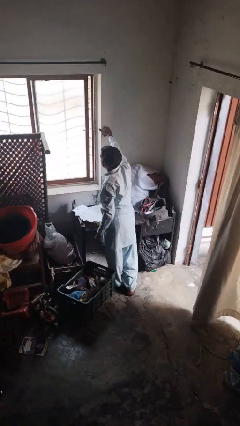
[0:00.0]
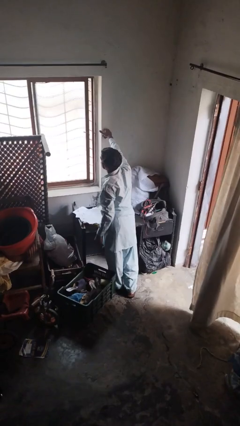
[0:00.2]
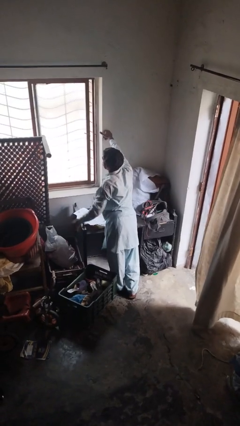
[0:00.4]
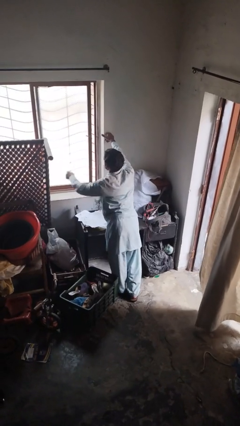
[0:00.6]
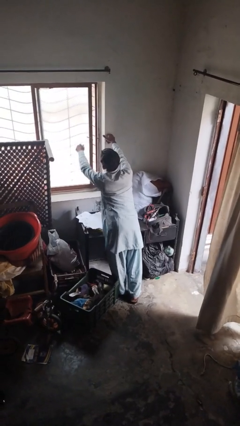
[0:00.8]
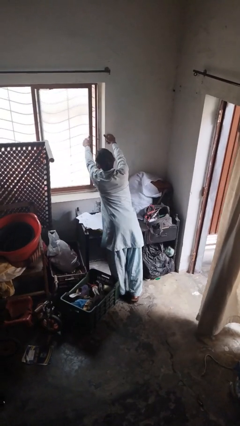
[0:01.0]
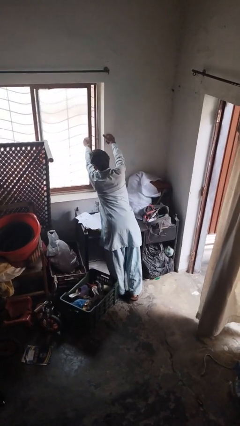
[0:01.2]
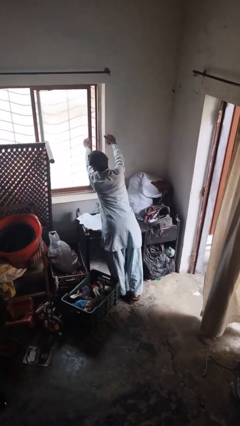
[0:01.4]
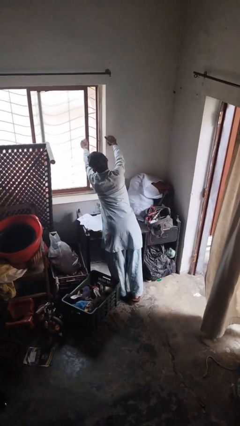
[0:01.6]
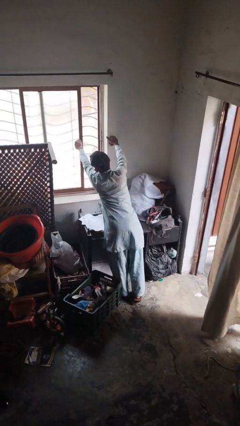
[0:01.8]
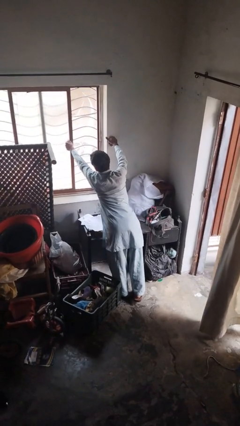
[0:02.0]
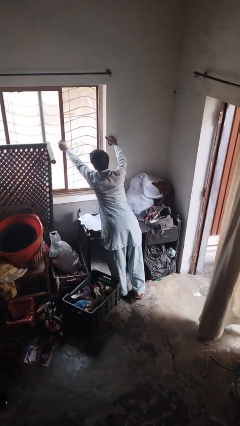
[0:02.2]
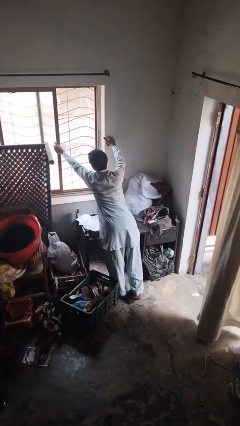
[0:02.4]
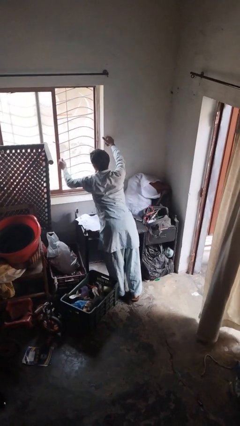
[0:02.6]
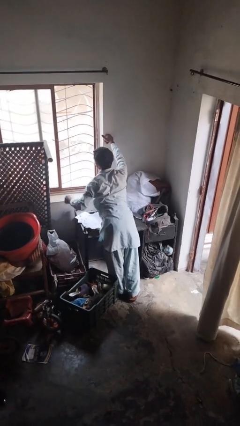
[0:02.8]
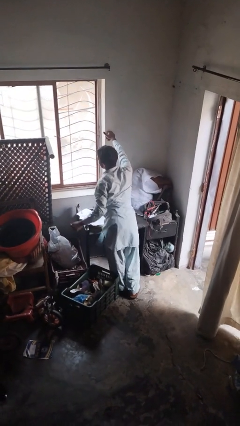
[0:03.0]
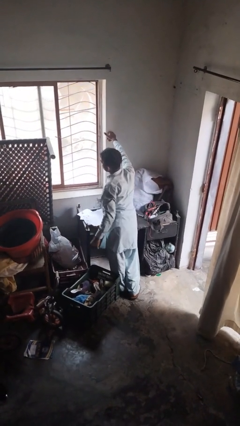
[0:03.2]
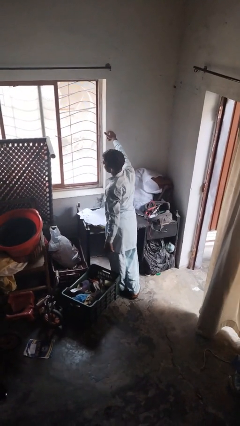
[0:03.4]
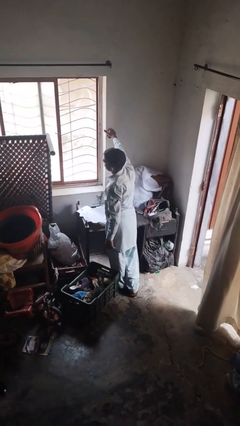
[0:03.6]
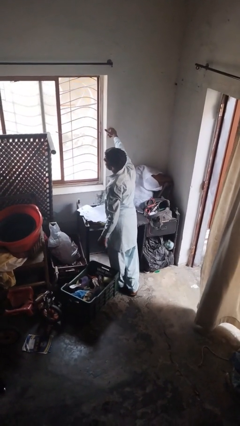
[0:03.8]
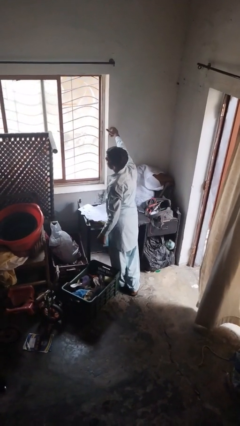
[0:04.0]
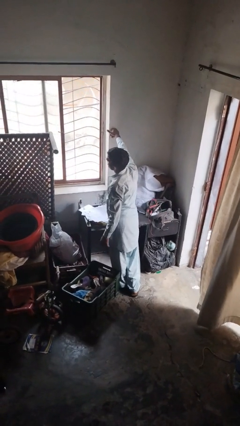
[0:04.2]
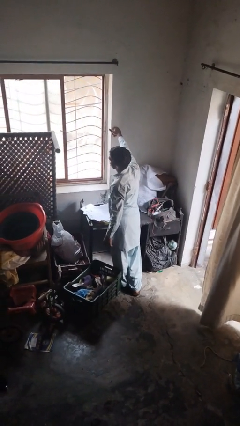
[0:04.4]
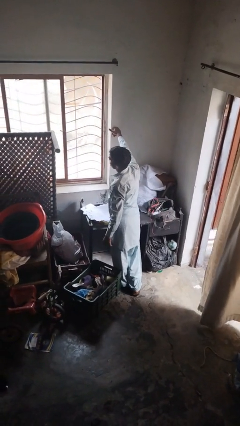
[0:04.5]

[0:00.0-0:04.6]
person opens home window

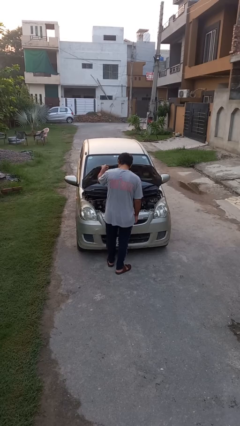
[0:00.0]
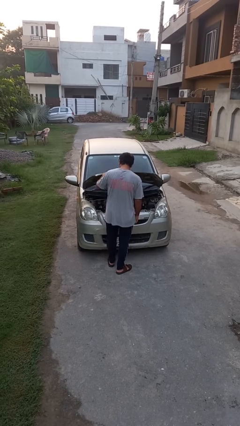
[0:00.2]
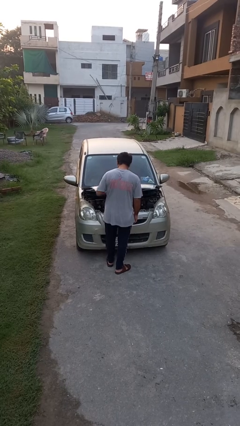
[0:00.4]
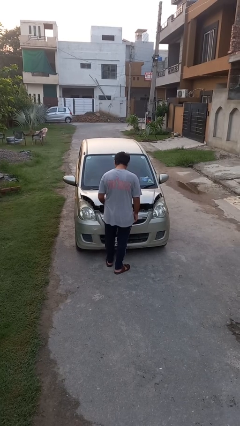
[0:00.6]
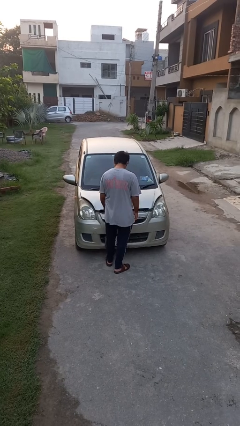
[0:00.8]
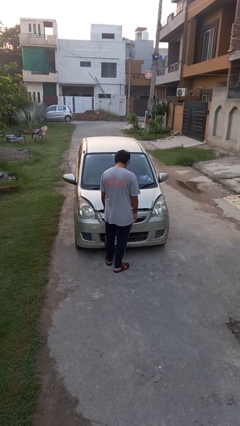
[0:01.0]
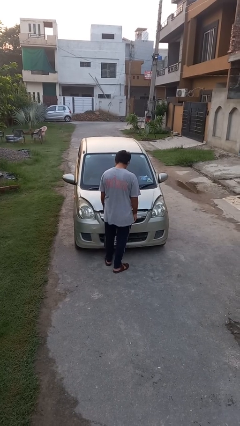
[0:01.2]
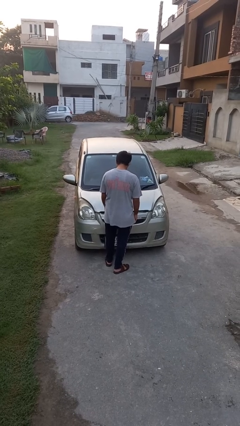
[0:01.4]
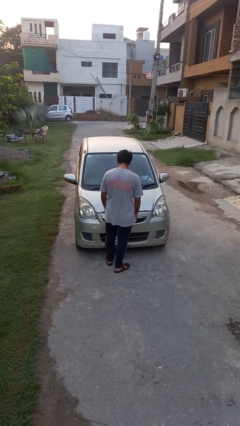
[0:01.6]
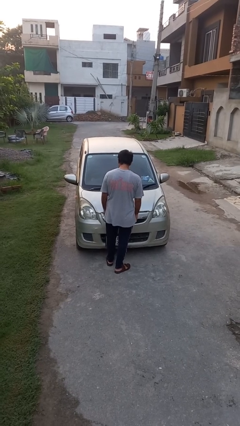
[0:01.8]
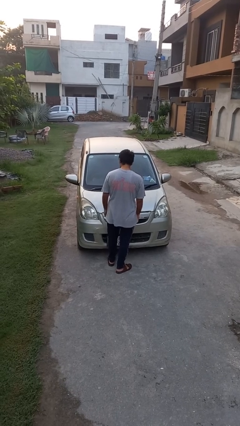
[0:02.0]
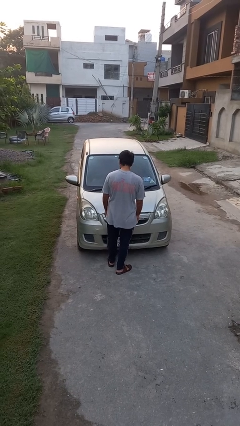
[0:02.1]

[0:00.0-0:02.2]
person closes car hood

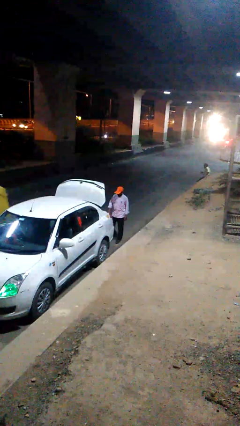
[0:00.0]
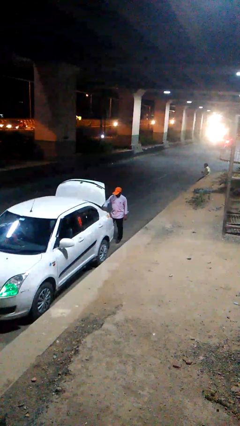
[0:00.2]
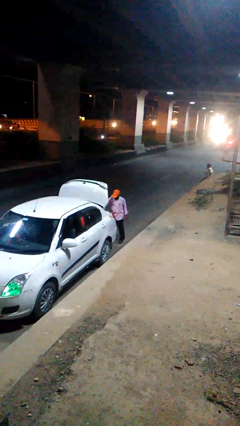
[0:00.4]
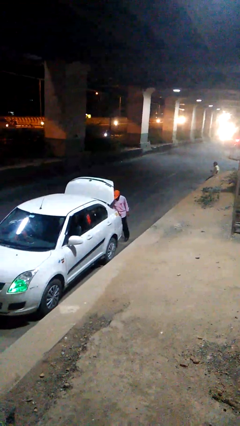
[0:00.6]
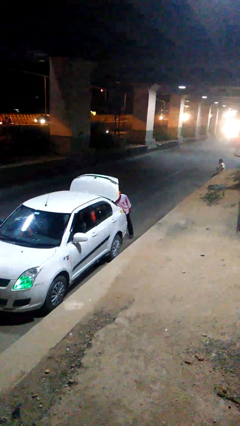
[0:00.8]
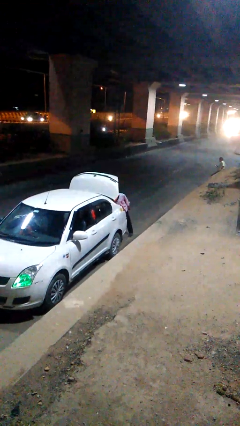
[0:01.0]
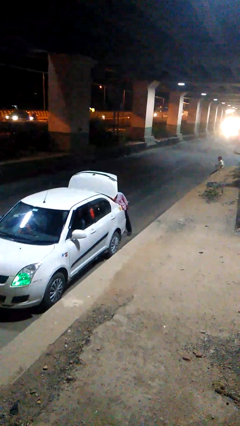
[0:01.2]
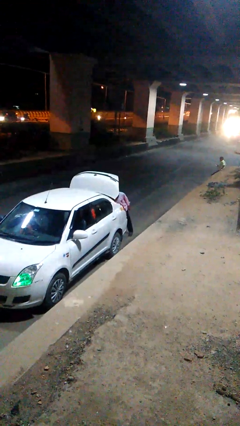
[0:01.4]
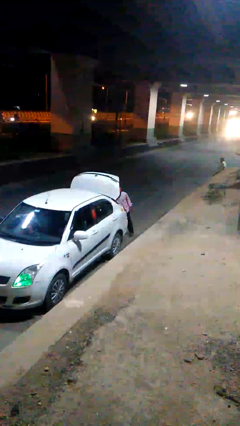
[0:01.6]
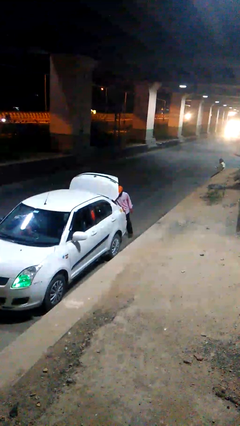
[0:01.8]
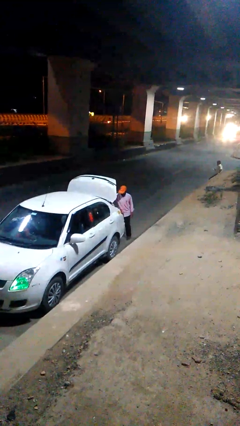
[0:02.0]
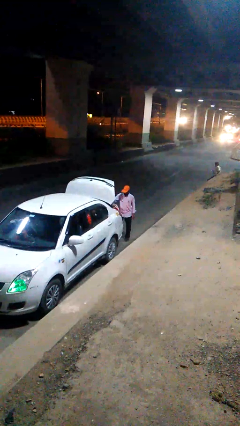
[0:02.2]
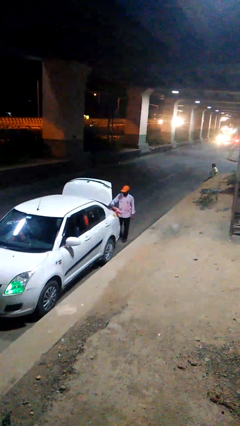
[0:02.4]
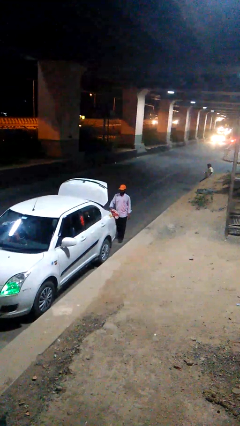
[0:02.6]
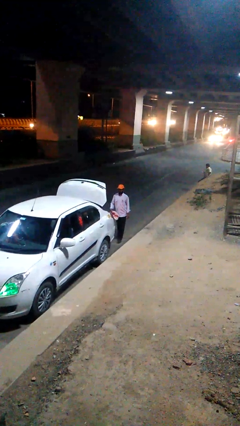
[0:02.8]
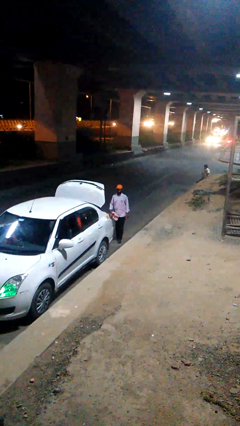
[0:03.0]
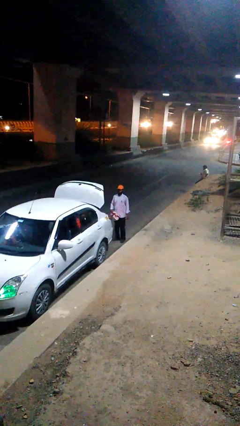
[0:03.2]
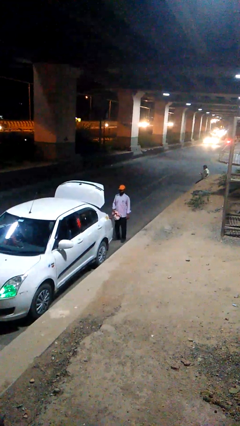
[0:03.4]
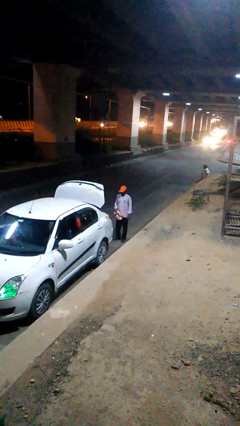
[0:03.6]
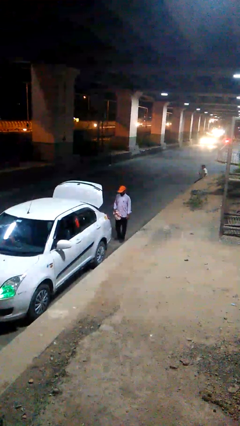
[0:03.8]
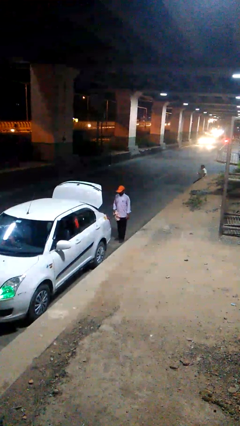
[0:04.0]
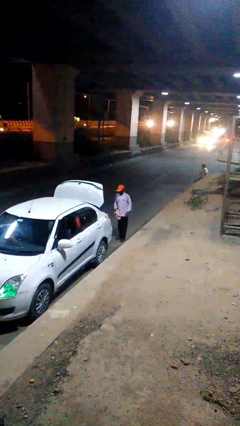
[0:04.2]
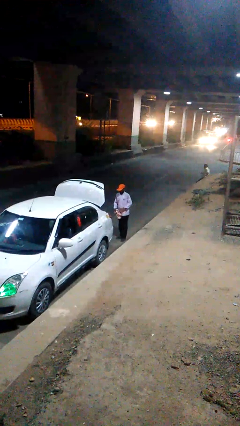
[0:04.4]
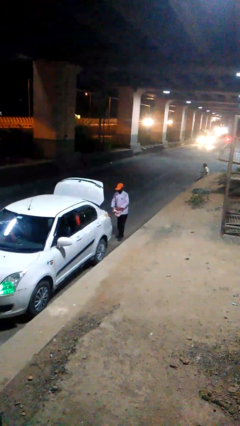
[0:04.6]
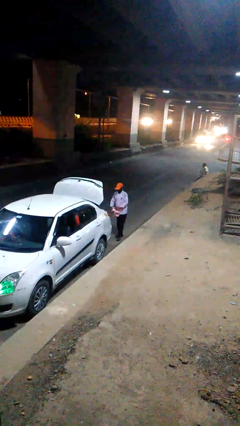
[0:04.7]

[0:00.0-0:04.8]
person unloads car

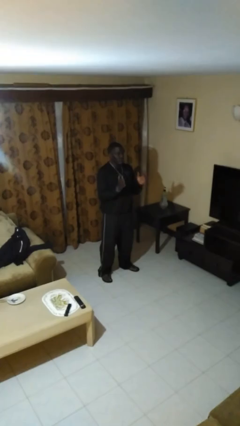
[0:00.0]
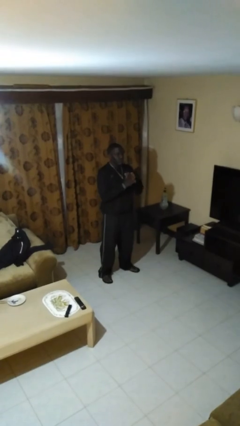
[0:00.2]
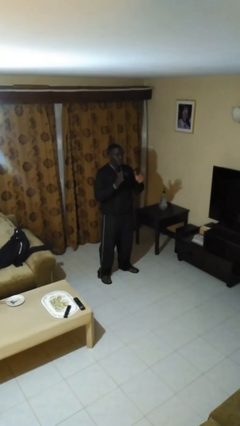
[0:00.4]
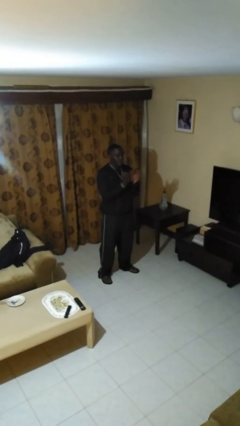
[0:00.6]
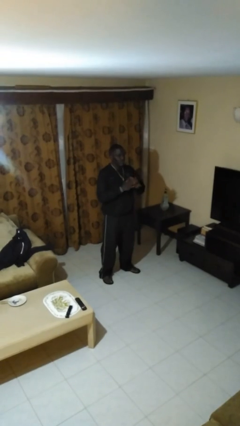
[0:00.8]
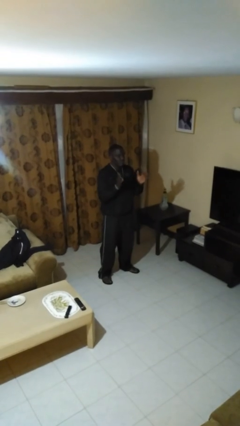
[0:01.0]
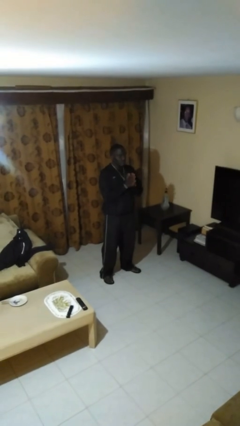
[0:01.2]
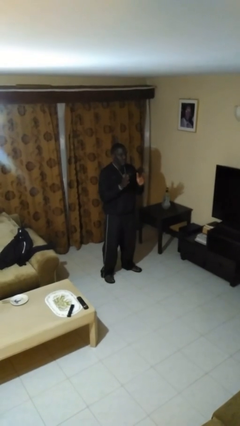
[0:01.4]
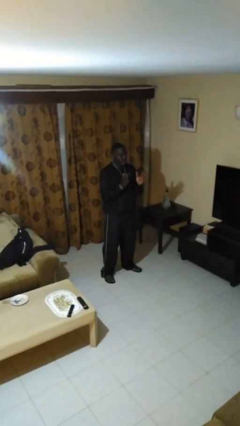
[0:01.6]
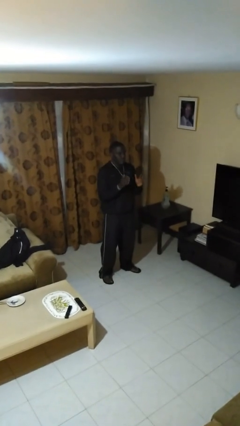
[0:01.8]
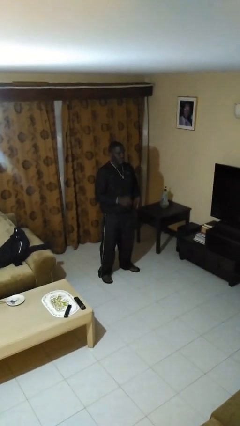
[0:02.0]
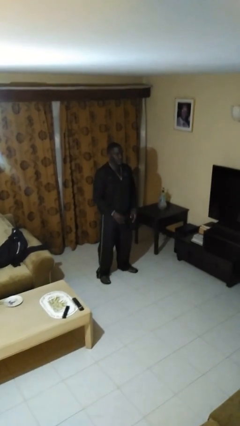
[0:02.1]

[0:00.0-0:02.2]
person claps hands

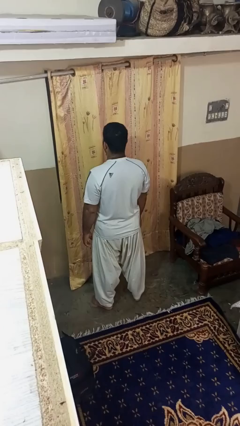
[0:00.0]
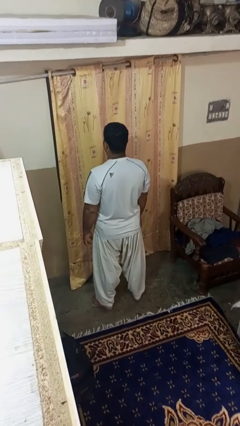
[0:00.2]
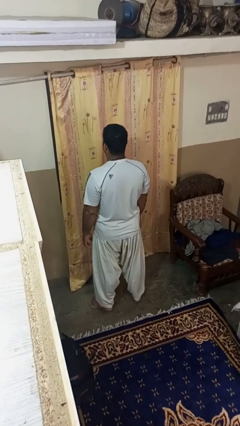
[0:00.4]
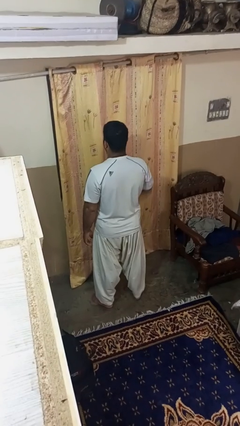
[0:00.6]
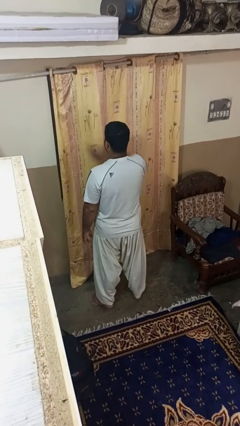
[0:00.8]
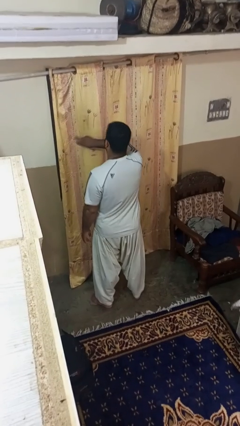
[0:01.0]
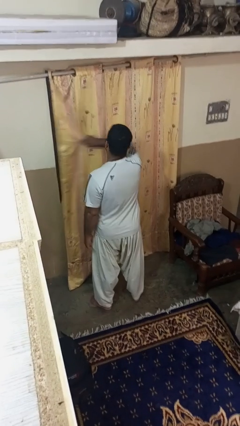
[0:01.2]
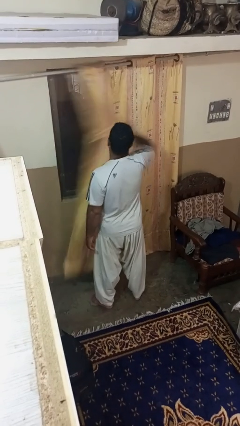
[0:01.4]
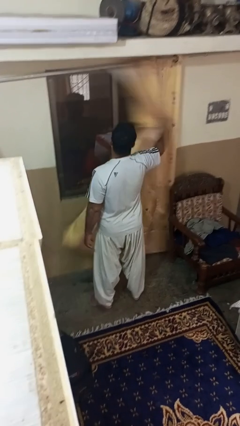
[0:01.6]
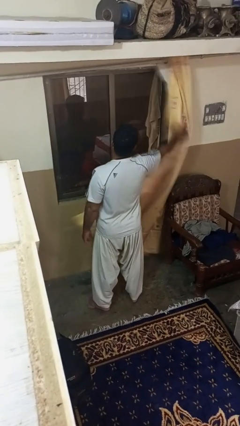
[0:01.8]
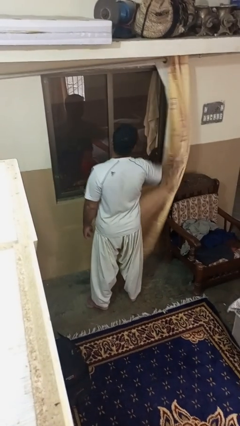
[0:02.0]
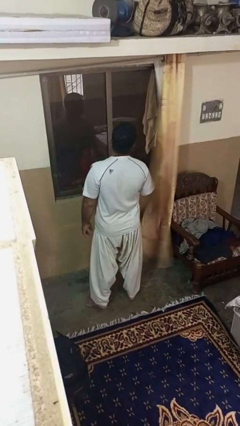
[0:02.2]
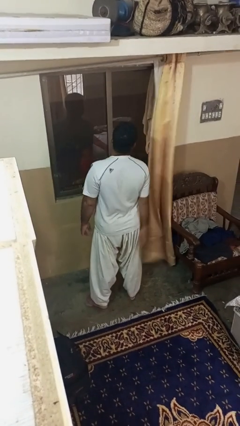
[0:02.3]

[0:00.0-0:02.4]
person opens curtains

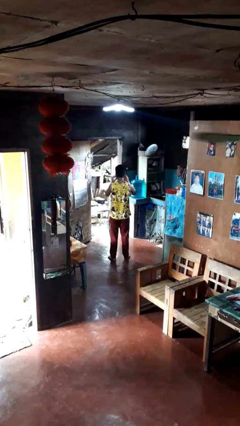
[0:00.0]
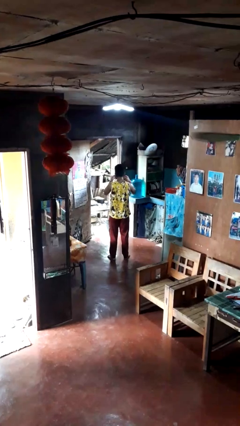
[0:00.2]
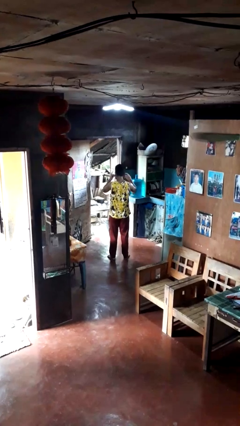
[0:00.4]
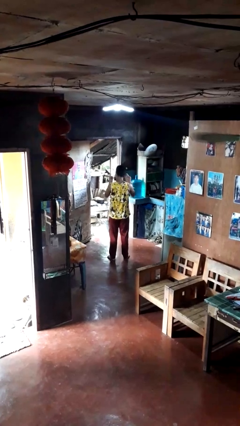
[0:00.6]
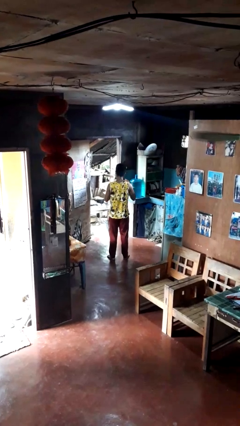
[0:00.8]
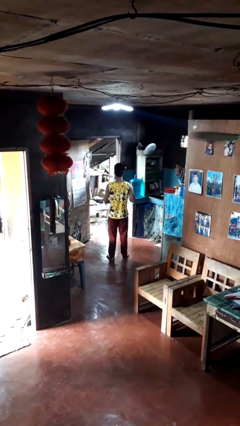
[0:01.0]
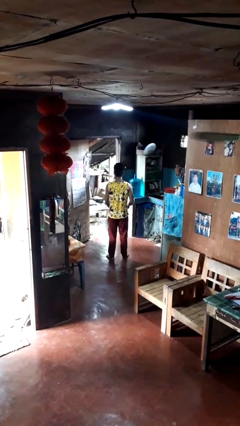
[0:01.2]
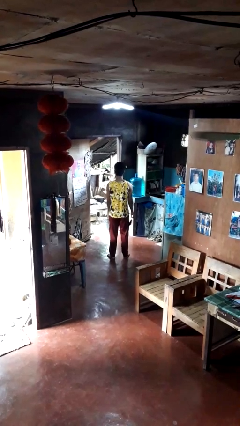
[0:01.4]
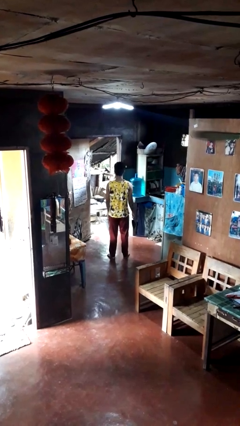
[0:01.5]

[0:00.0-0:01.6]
person takes off facemask
